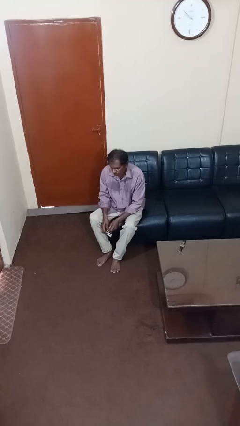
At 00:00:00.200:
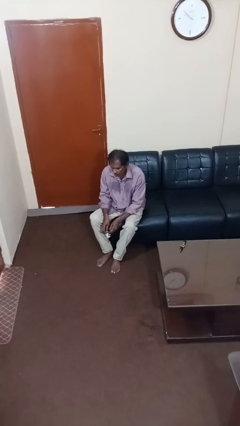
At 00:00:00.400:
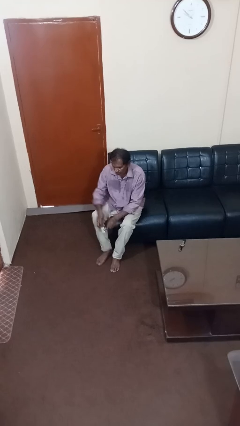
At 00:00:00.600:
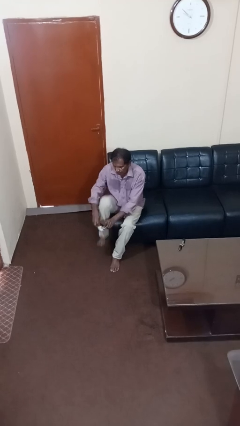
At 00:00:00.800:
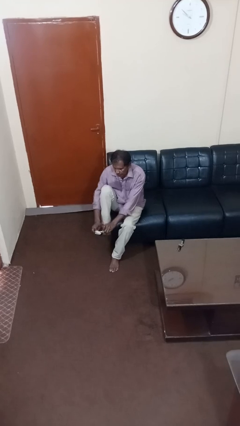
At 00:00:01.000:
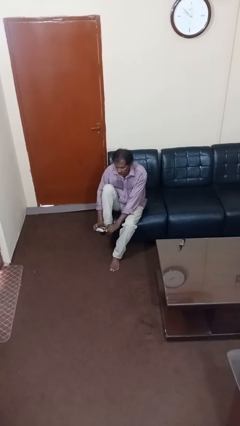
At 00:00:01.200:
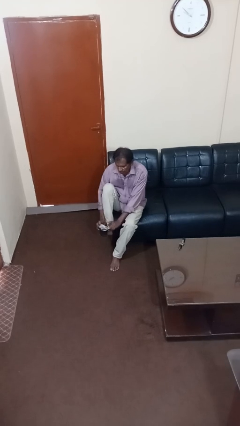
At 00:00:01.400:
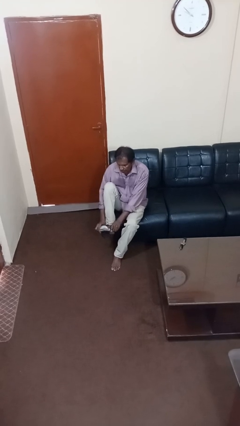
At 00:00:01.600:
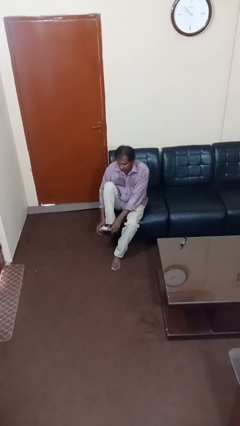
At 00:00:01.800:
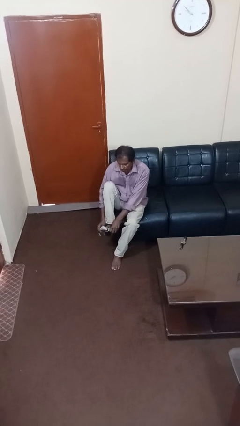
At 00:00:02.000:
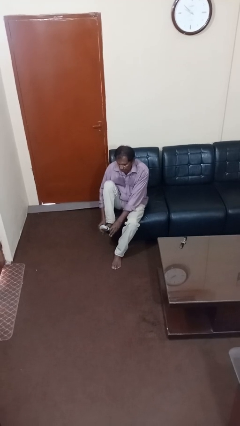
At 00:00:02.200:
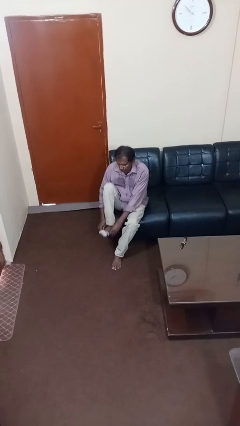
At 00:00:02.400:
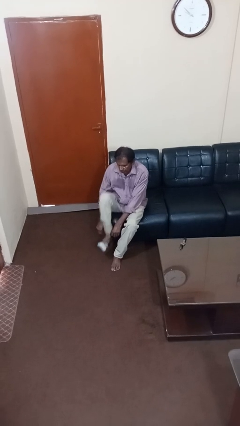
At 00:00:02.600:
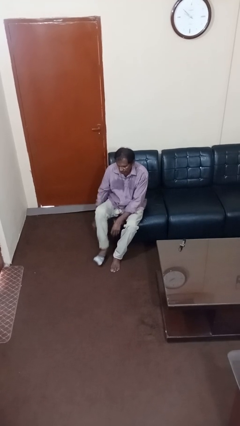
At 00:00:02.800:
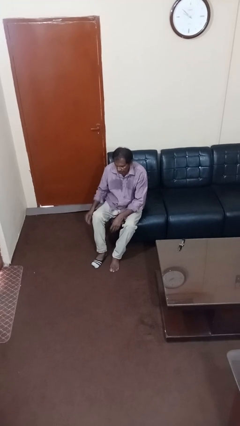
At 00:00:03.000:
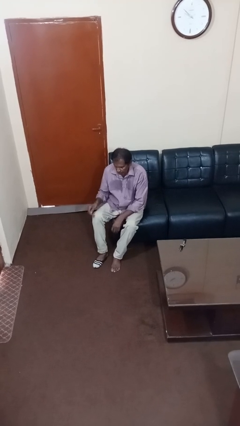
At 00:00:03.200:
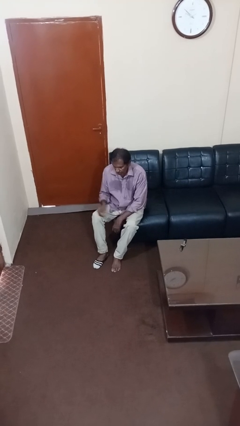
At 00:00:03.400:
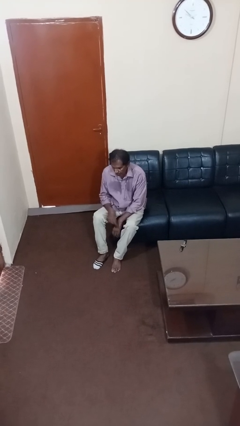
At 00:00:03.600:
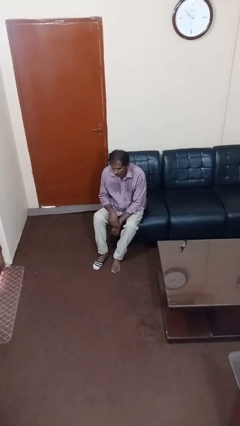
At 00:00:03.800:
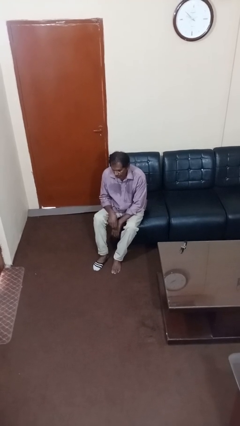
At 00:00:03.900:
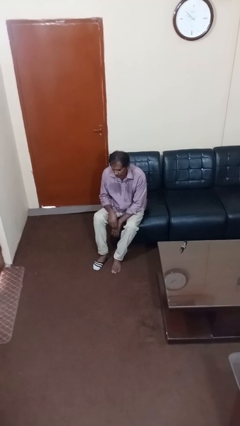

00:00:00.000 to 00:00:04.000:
person puts on socks

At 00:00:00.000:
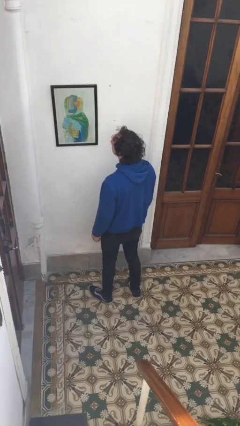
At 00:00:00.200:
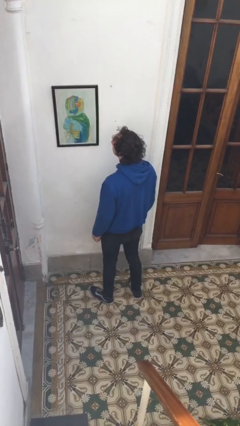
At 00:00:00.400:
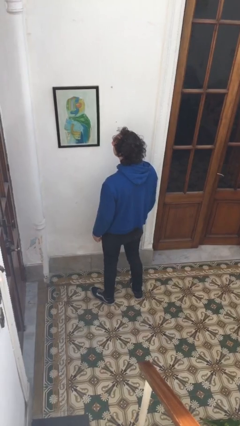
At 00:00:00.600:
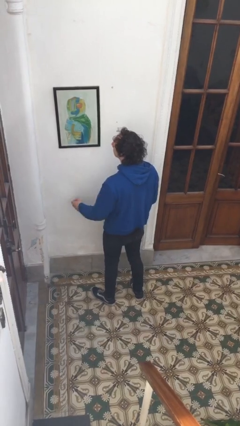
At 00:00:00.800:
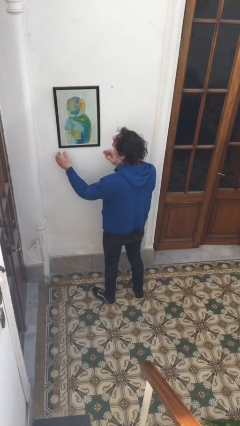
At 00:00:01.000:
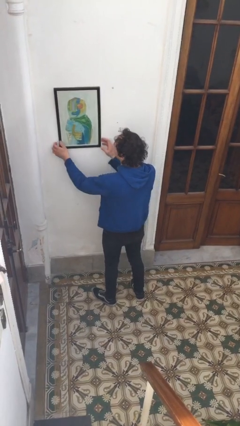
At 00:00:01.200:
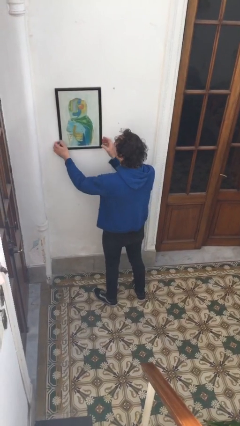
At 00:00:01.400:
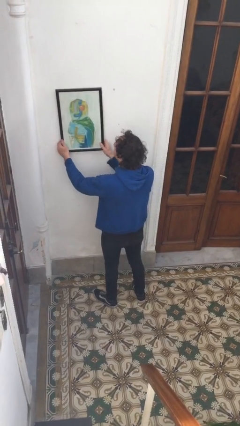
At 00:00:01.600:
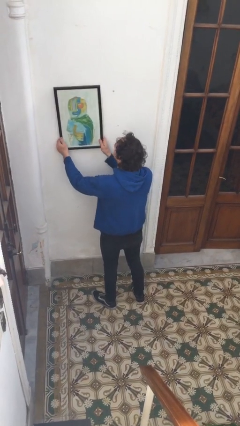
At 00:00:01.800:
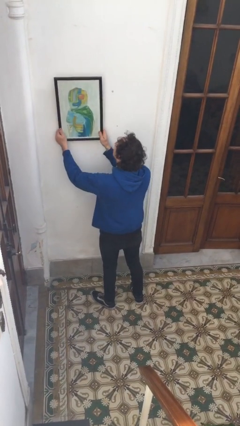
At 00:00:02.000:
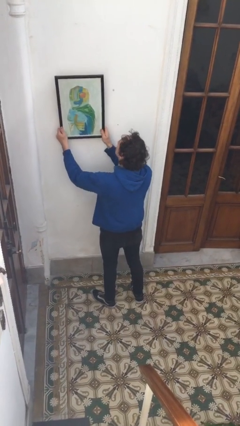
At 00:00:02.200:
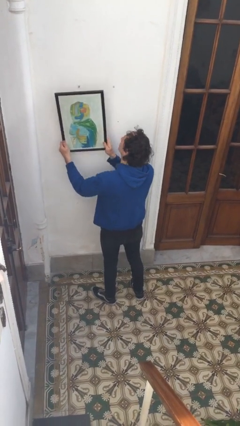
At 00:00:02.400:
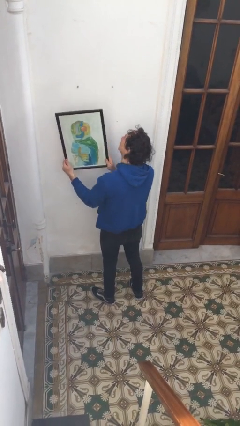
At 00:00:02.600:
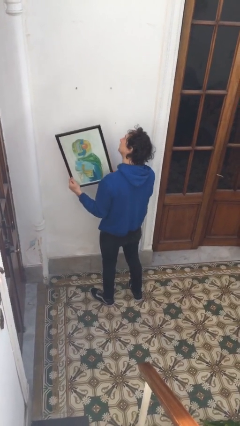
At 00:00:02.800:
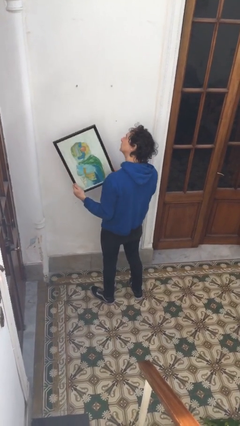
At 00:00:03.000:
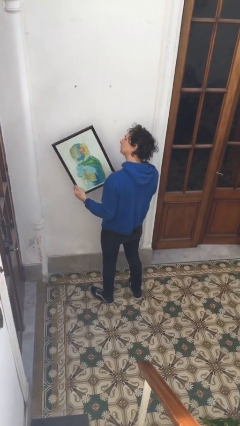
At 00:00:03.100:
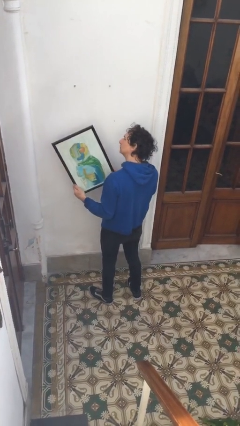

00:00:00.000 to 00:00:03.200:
person takes down picture frame

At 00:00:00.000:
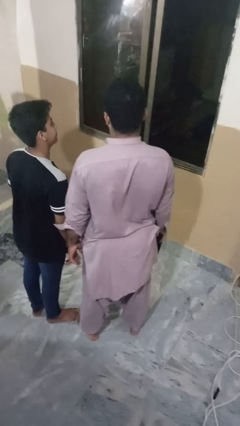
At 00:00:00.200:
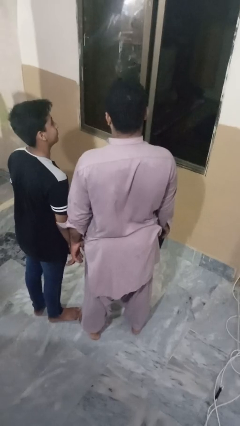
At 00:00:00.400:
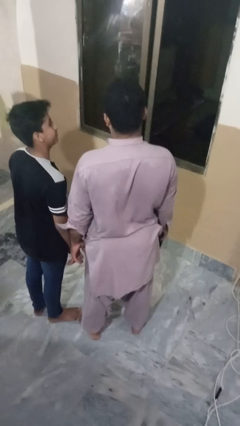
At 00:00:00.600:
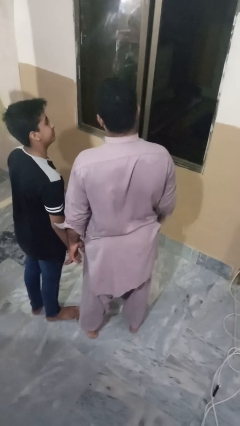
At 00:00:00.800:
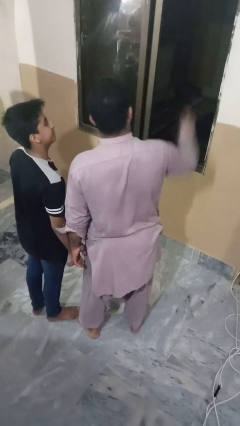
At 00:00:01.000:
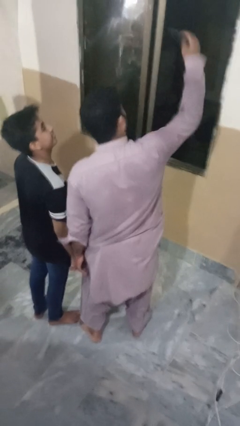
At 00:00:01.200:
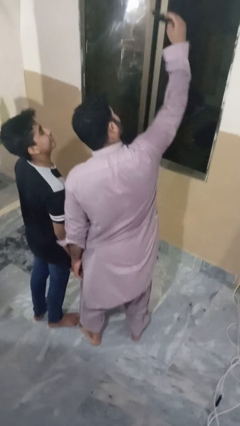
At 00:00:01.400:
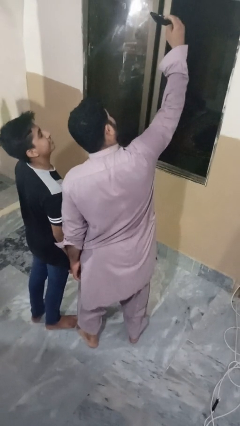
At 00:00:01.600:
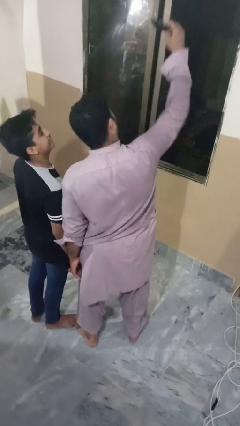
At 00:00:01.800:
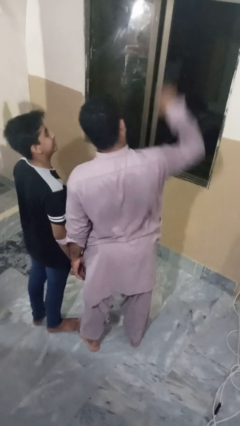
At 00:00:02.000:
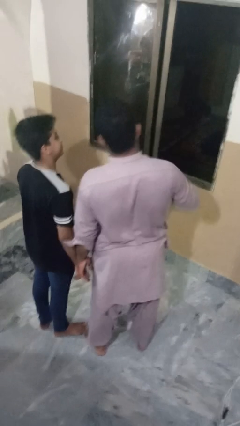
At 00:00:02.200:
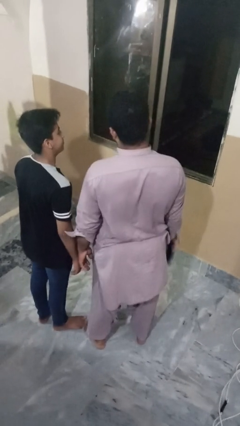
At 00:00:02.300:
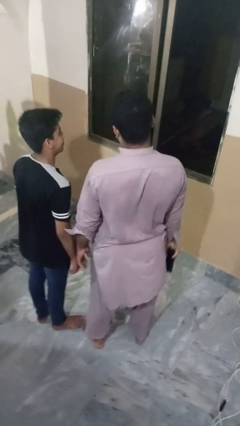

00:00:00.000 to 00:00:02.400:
person takes selfie with person

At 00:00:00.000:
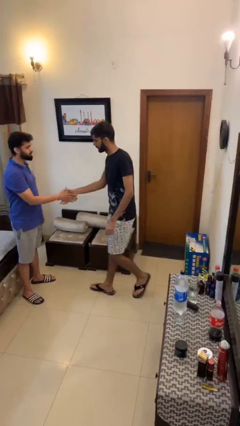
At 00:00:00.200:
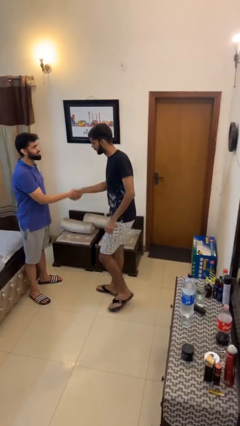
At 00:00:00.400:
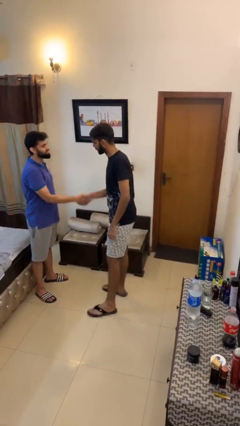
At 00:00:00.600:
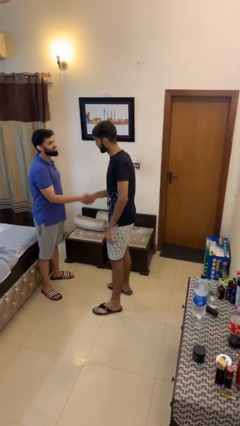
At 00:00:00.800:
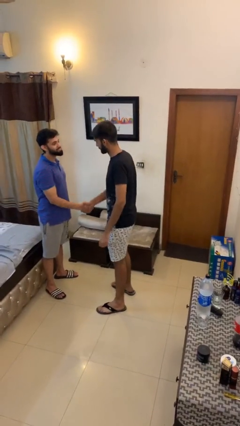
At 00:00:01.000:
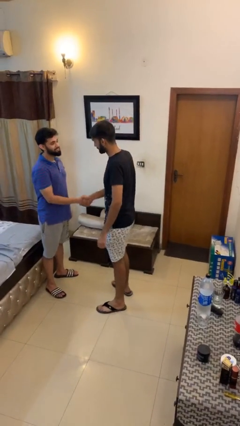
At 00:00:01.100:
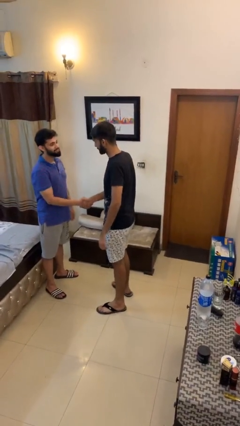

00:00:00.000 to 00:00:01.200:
person shakes hand

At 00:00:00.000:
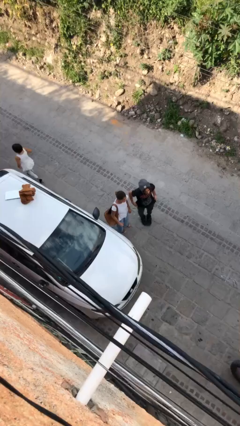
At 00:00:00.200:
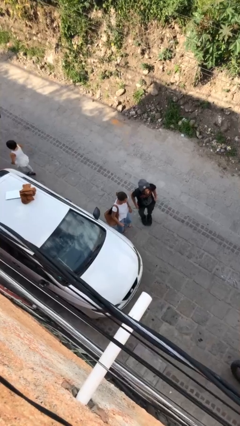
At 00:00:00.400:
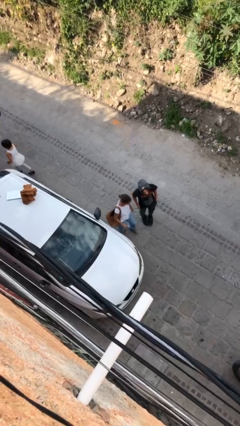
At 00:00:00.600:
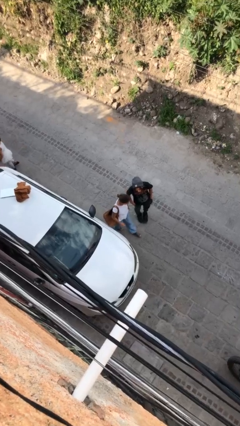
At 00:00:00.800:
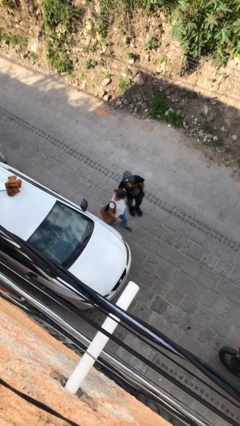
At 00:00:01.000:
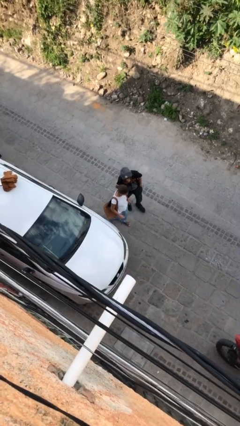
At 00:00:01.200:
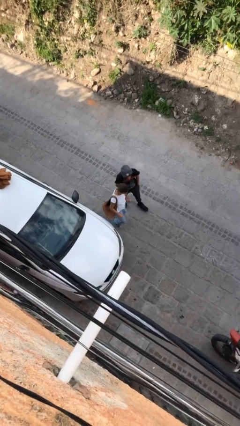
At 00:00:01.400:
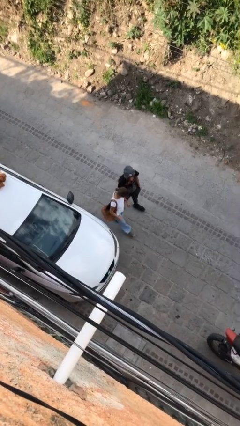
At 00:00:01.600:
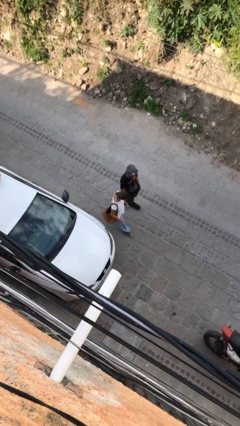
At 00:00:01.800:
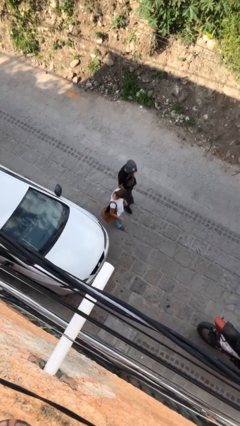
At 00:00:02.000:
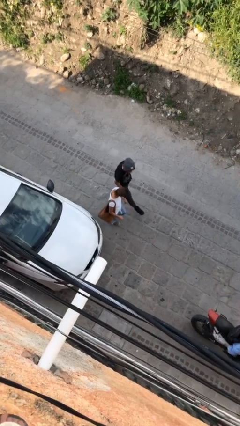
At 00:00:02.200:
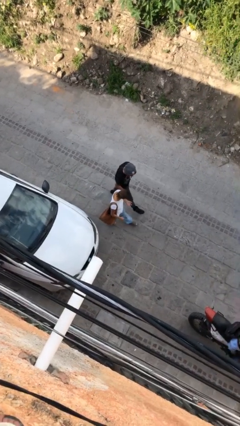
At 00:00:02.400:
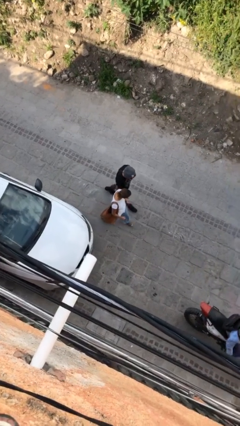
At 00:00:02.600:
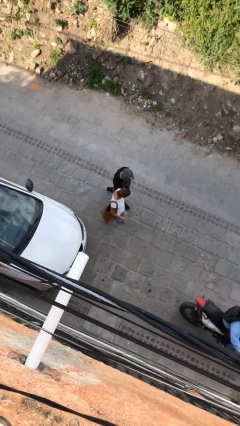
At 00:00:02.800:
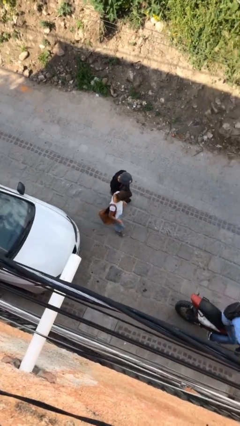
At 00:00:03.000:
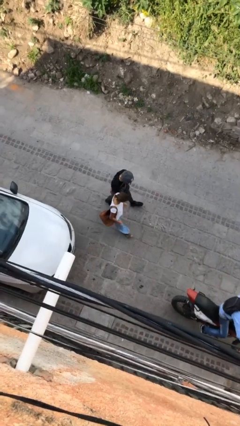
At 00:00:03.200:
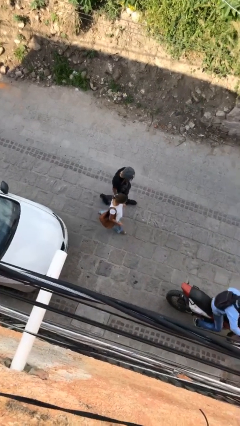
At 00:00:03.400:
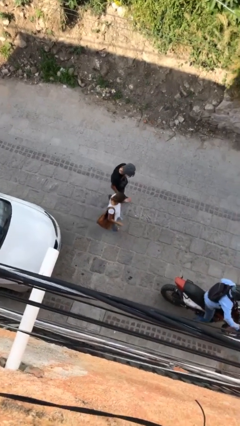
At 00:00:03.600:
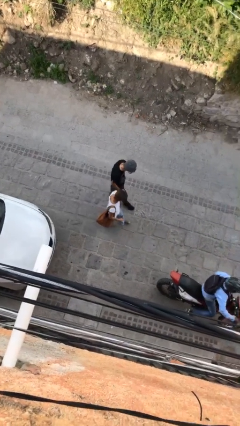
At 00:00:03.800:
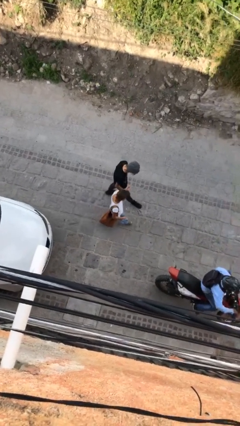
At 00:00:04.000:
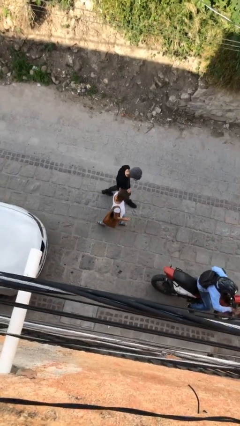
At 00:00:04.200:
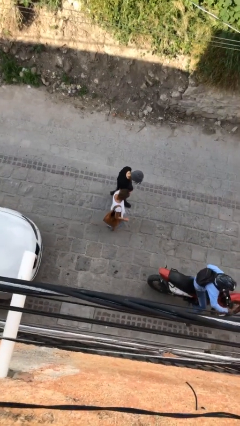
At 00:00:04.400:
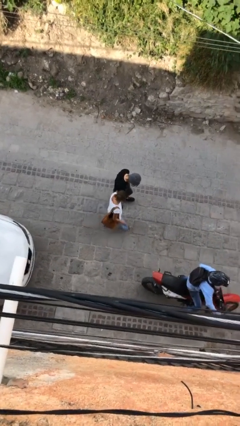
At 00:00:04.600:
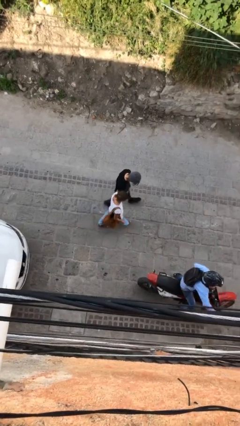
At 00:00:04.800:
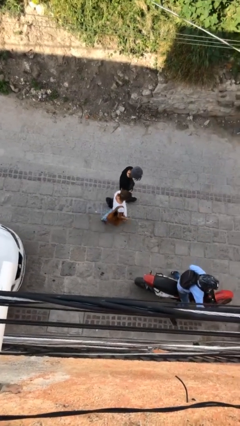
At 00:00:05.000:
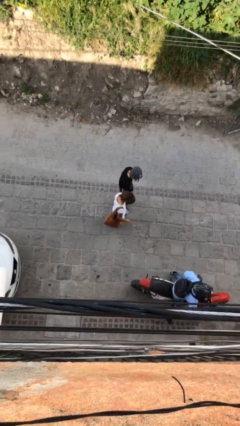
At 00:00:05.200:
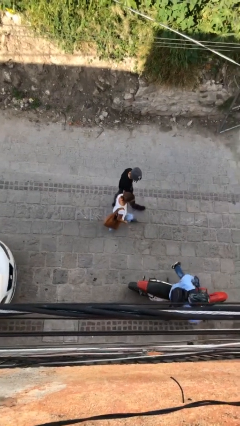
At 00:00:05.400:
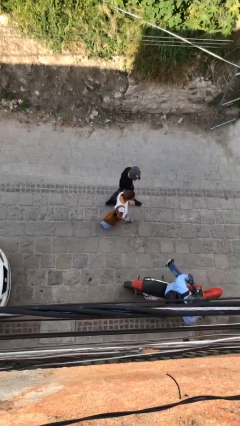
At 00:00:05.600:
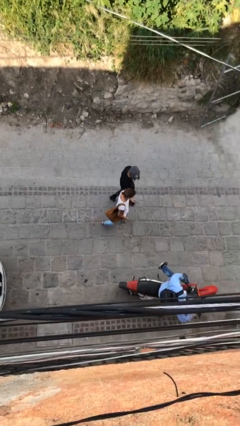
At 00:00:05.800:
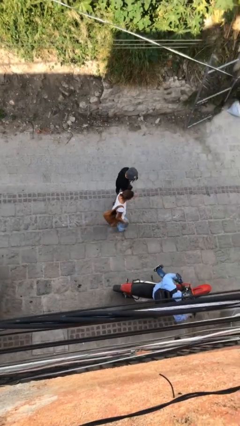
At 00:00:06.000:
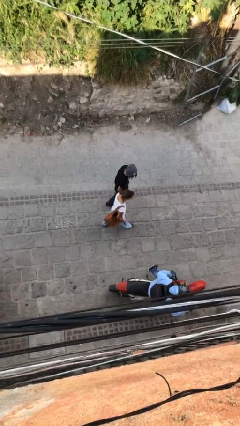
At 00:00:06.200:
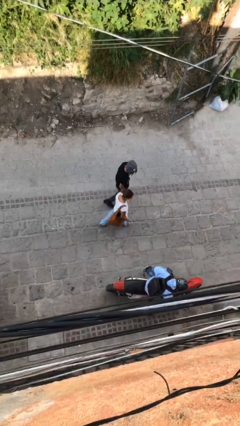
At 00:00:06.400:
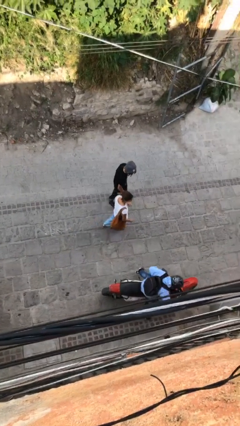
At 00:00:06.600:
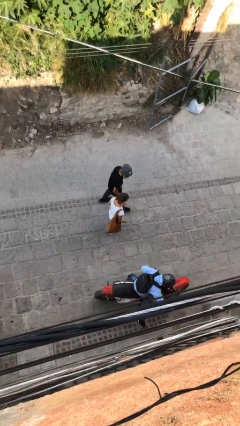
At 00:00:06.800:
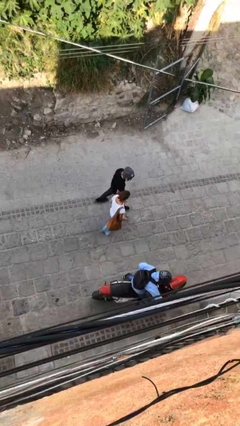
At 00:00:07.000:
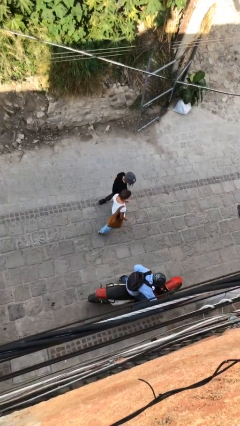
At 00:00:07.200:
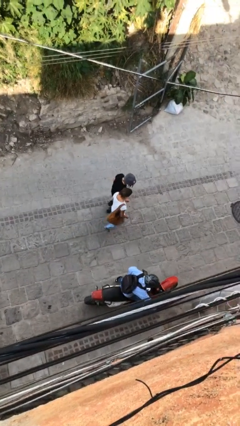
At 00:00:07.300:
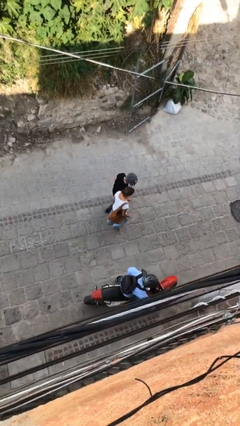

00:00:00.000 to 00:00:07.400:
person talks to person
